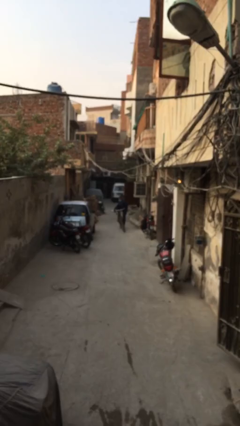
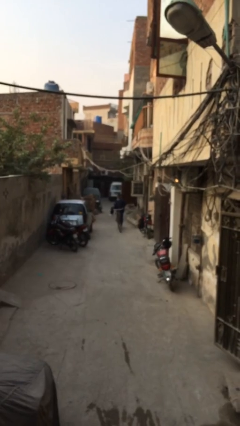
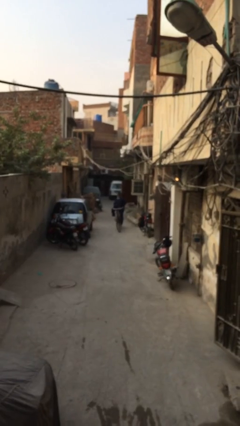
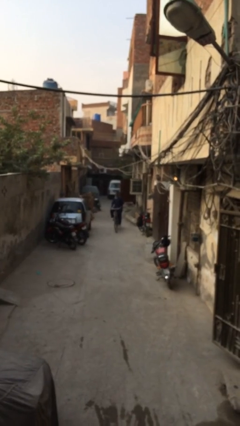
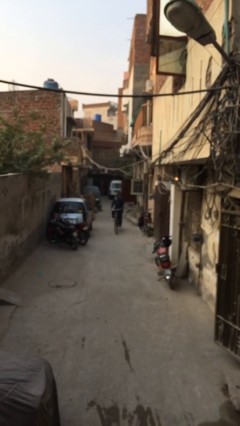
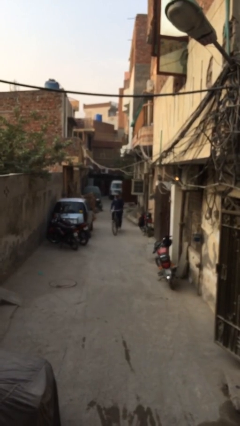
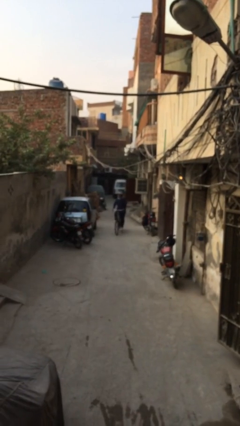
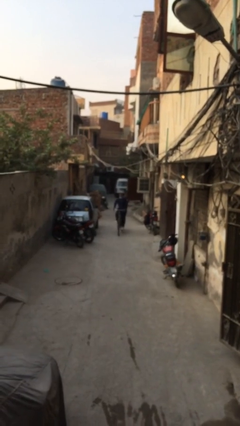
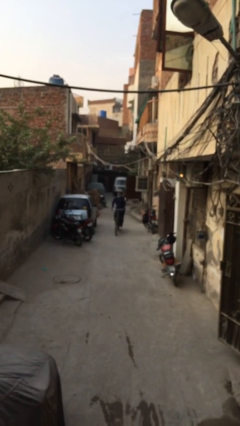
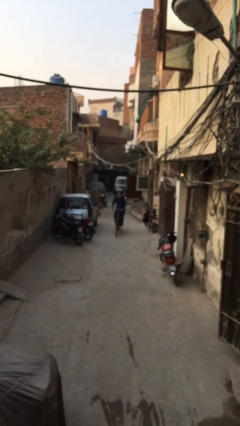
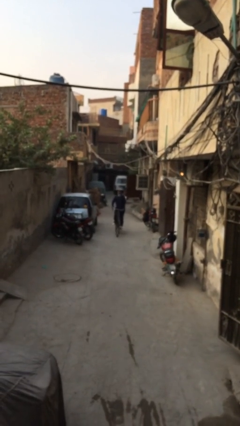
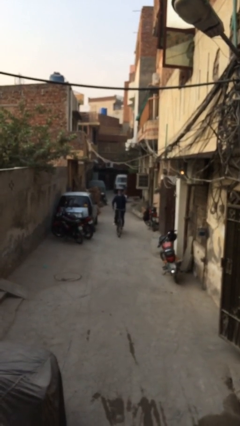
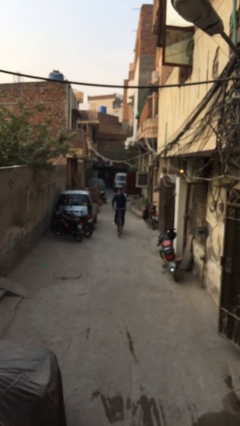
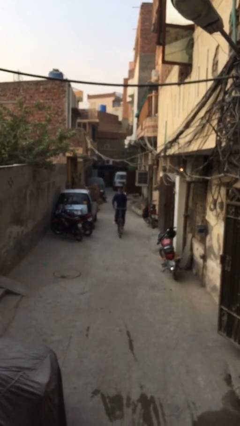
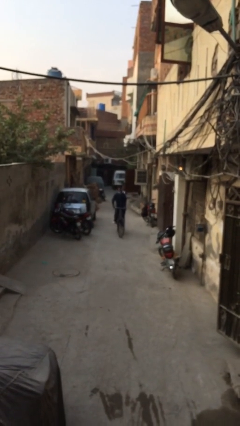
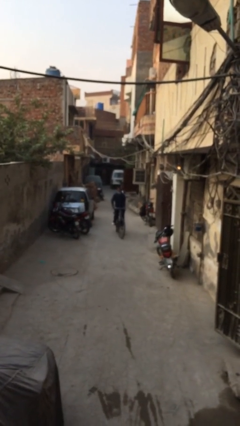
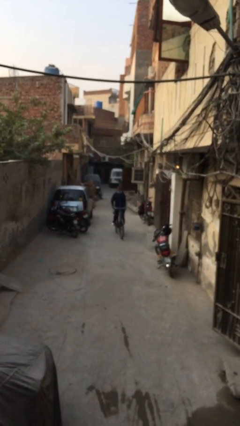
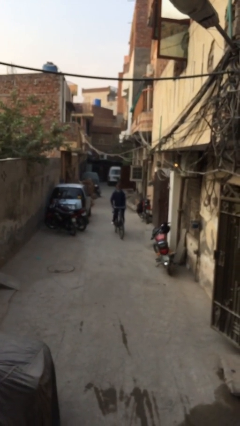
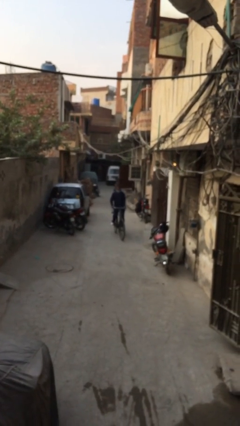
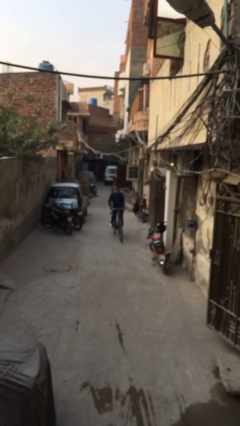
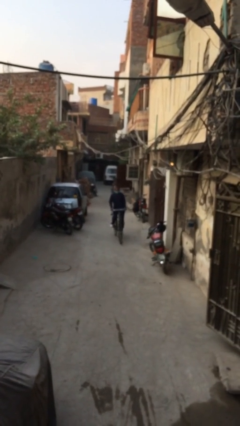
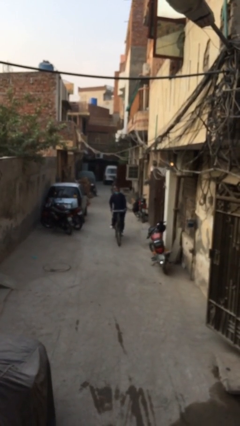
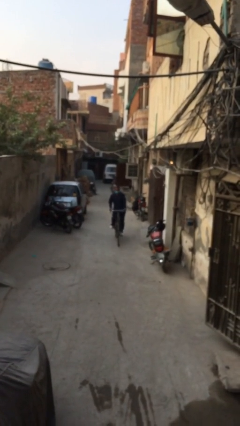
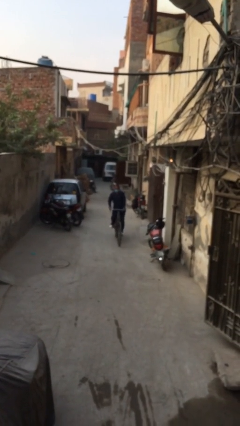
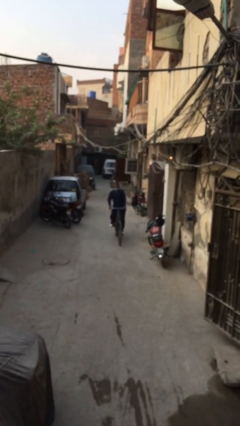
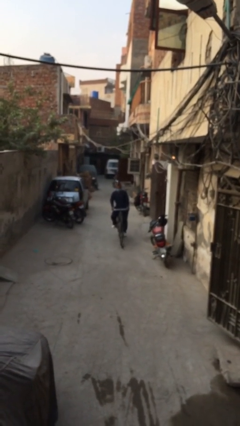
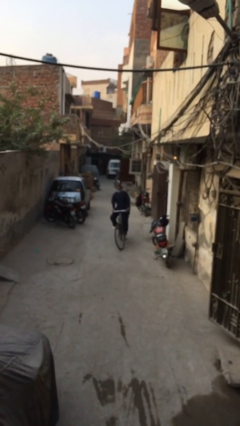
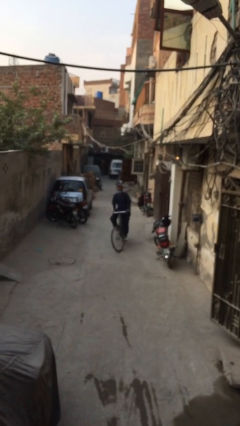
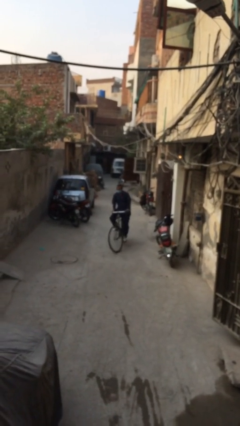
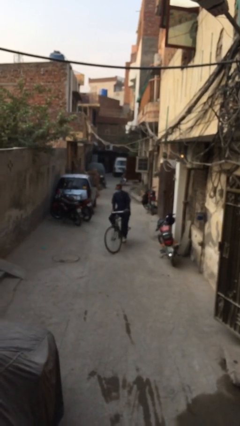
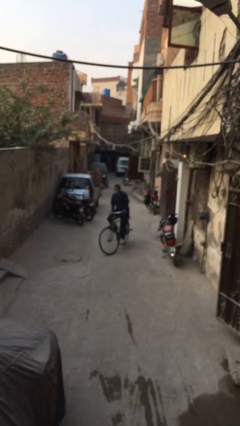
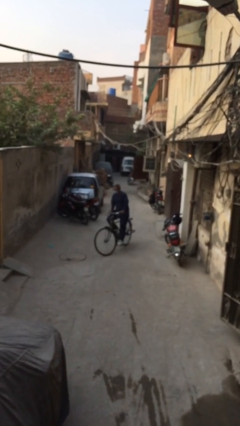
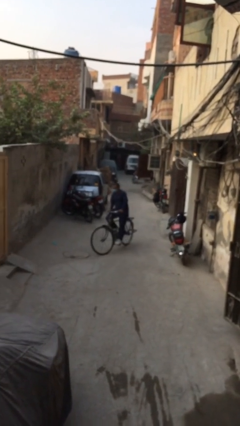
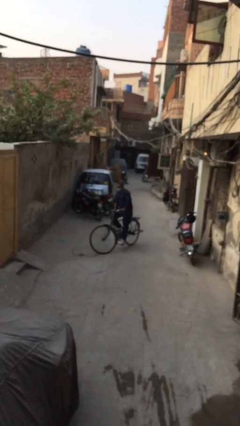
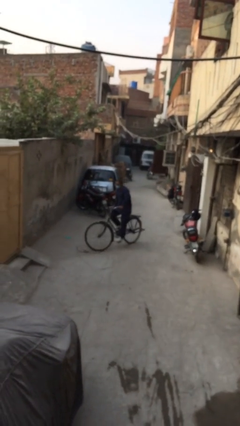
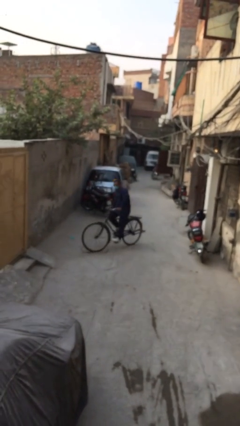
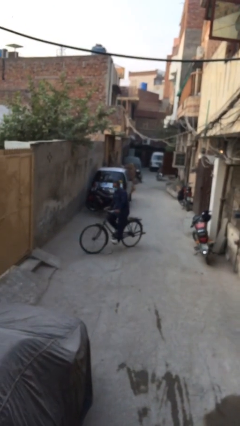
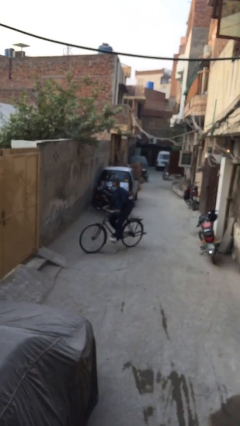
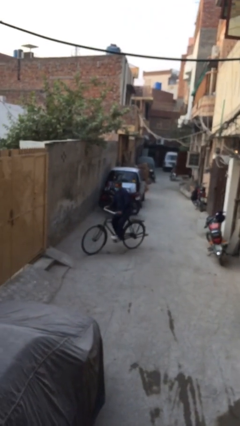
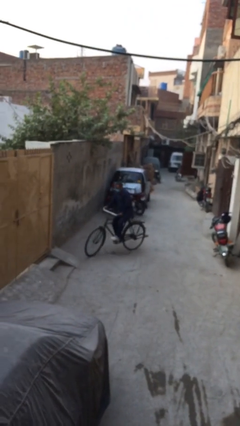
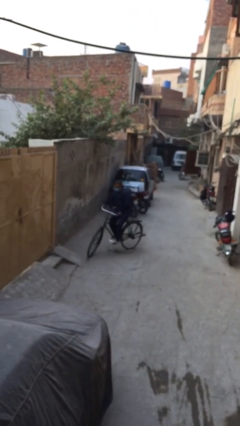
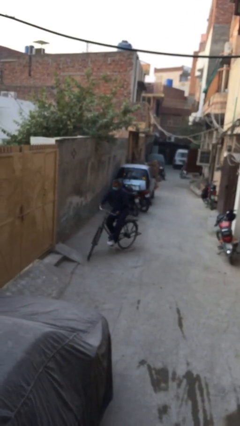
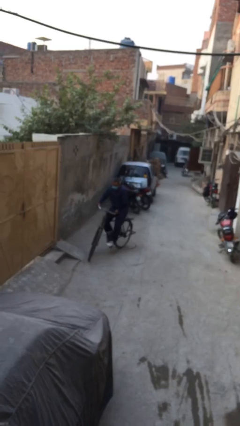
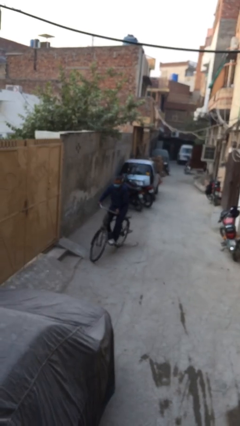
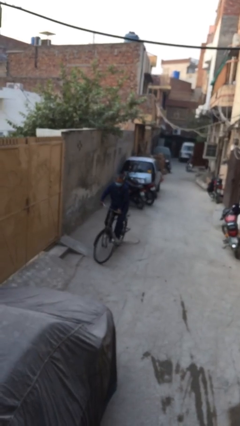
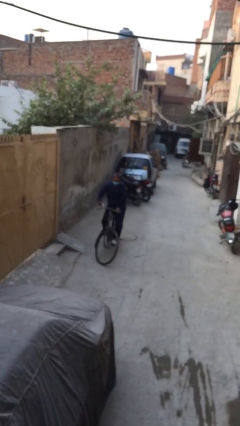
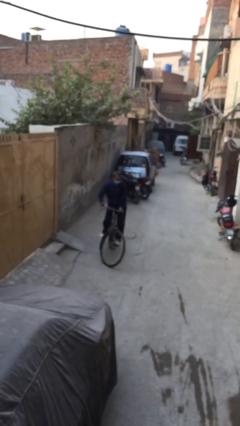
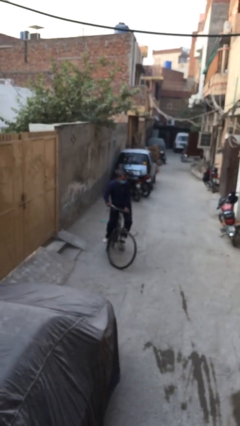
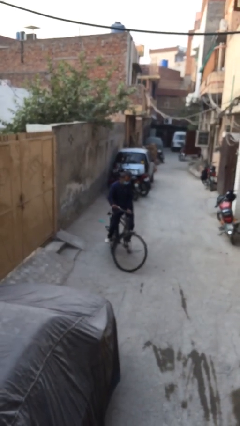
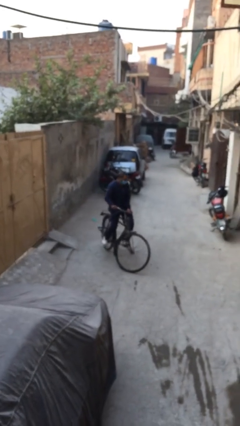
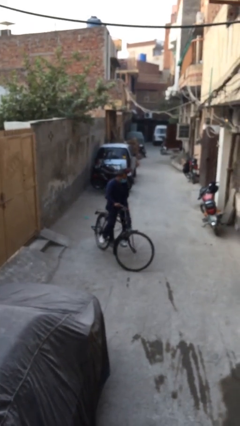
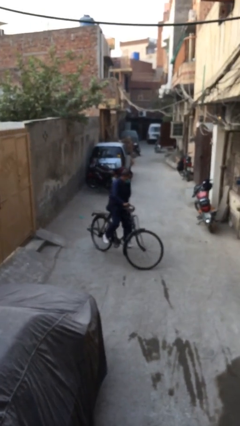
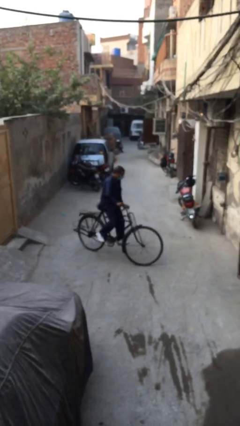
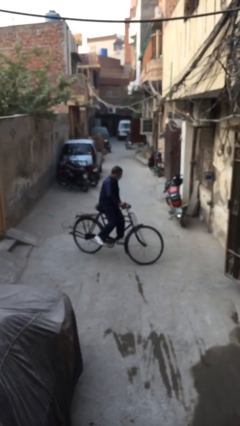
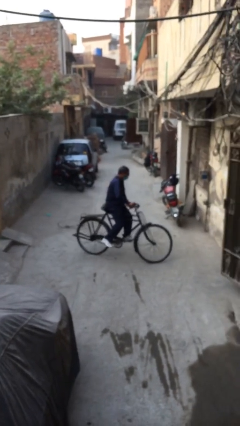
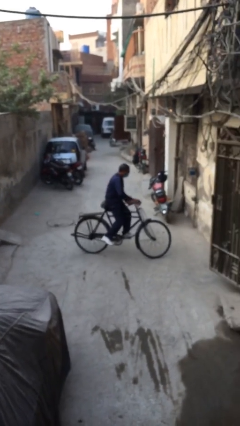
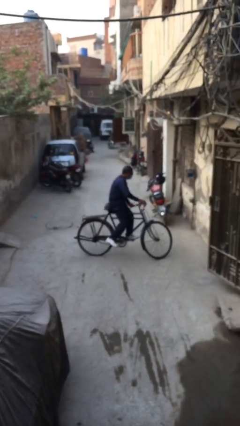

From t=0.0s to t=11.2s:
person rides bicycle

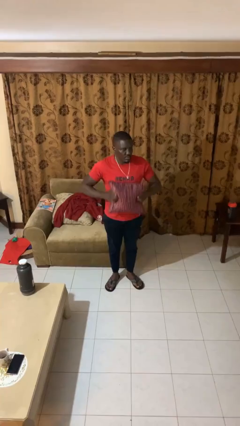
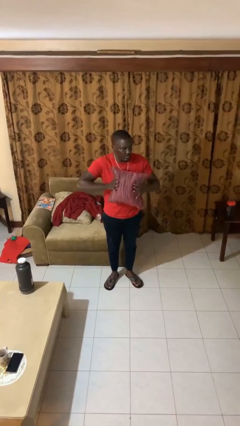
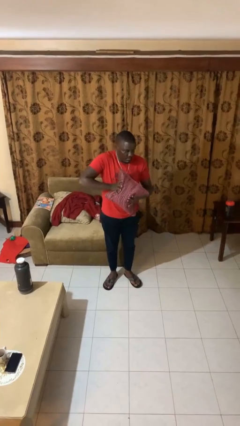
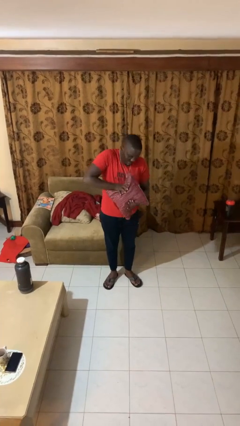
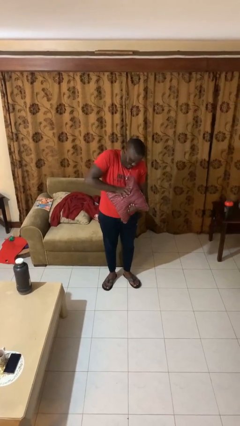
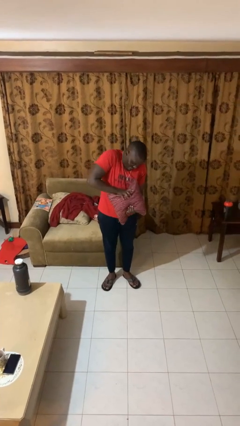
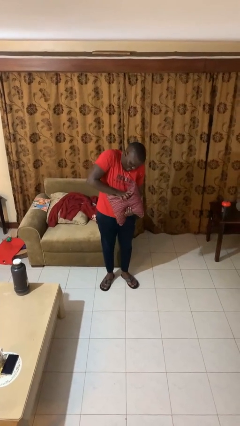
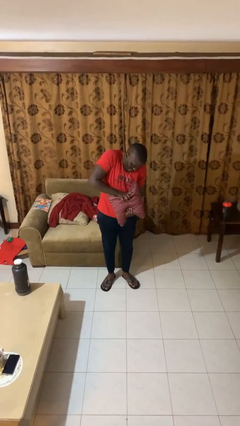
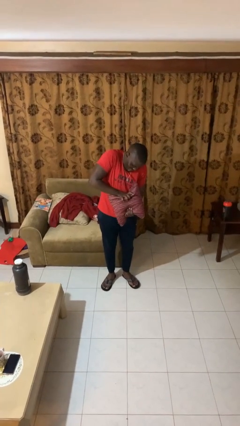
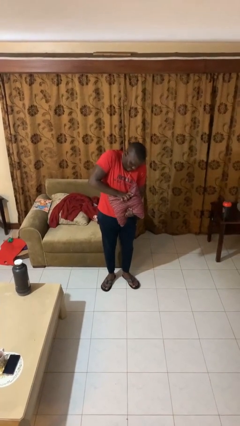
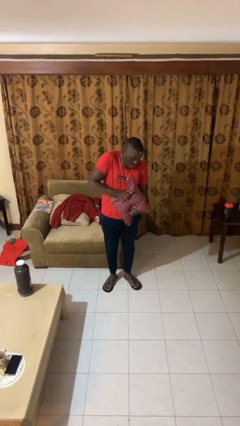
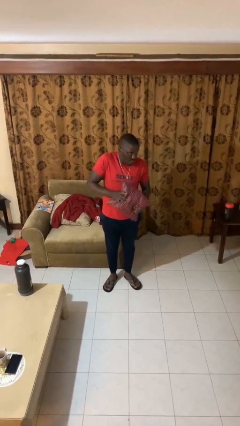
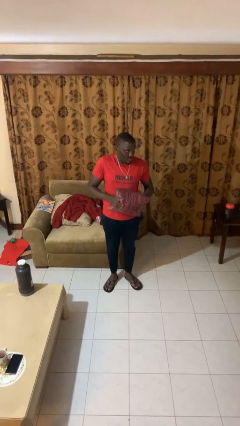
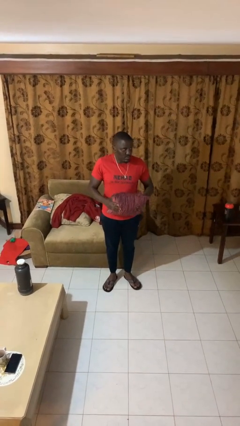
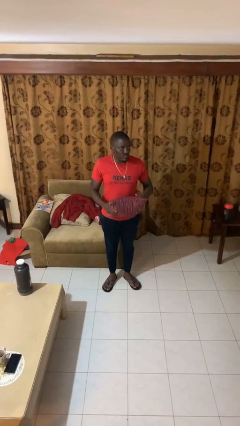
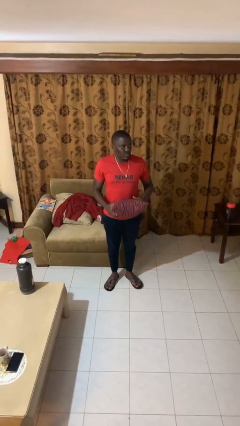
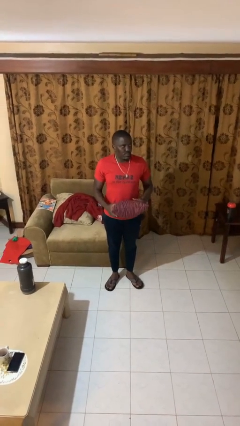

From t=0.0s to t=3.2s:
person squeezes object

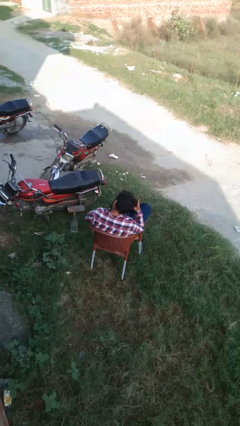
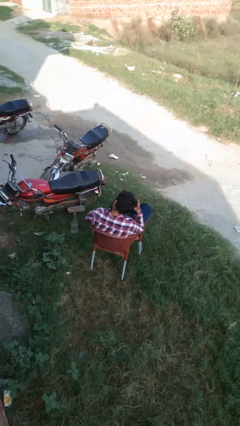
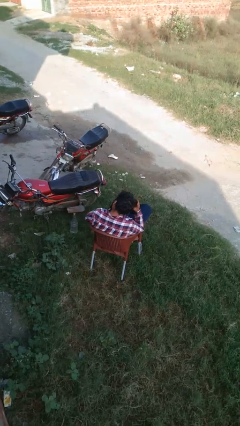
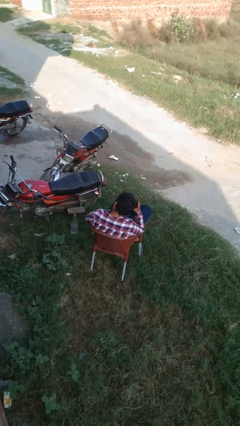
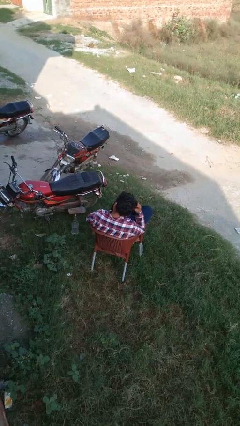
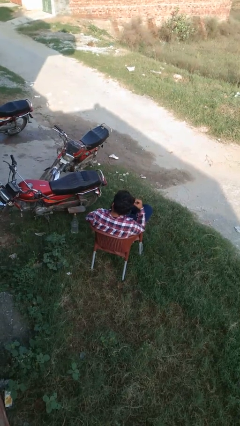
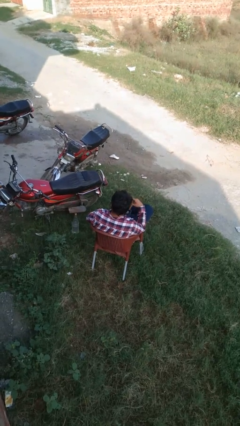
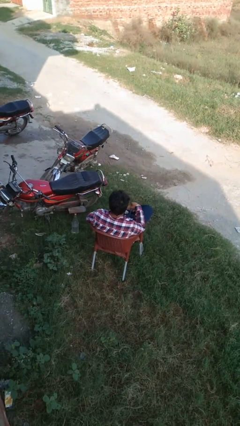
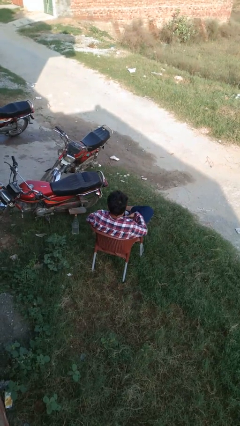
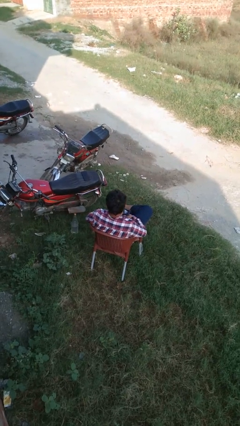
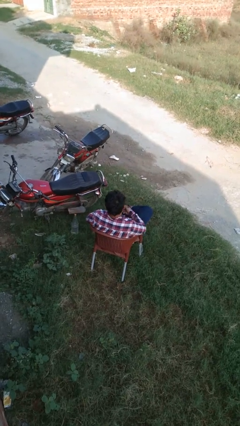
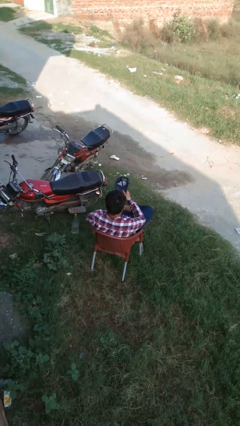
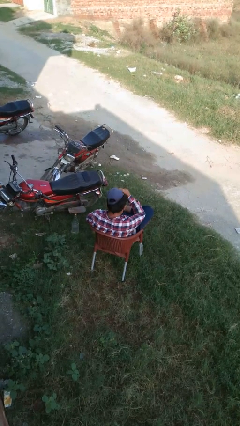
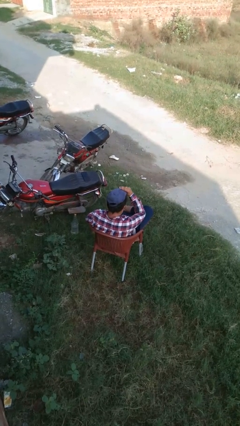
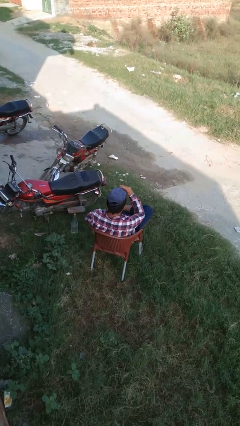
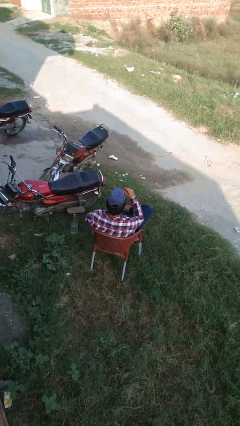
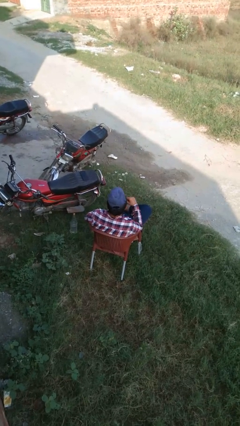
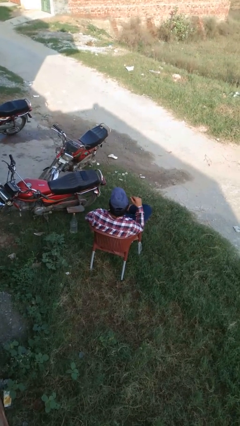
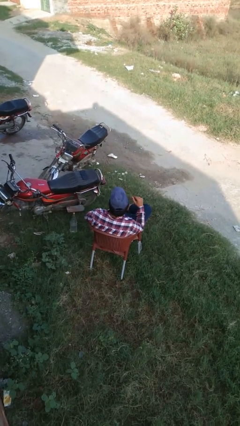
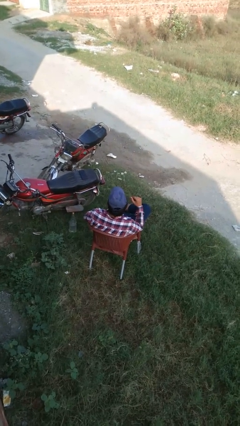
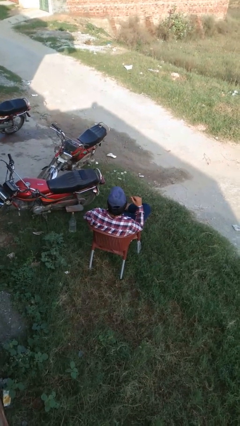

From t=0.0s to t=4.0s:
person puts on hat
